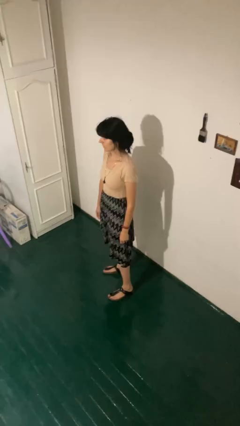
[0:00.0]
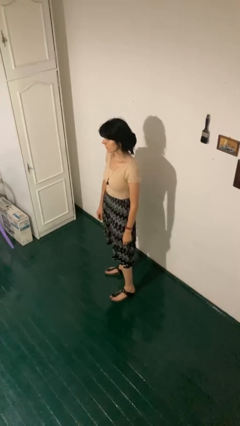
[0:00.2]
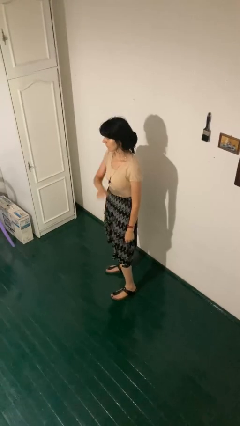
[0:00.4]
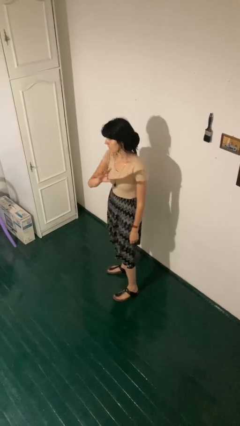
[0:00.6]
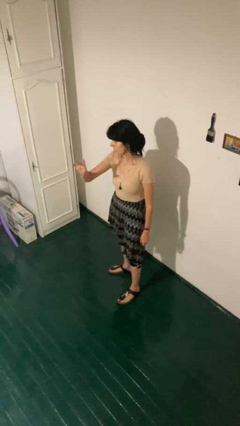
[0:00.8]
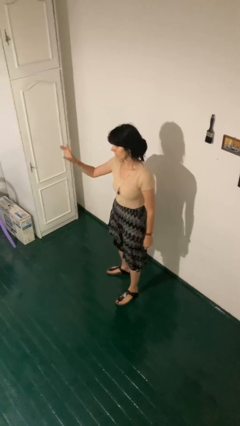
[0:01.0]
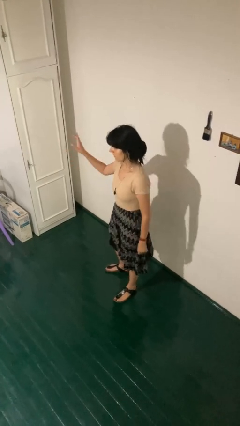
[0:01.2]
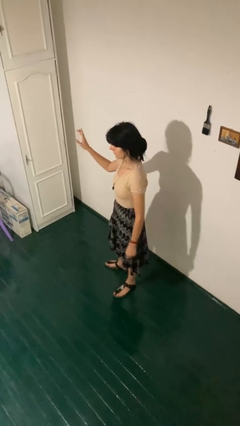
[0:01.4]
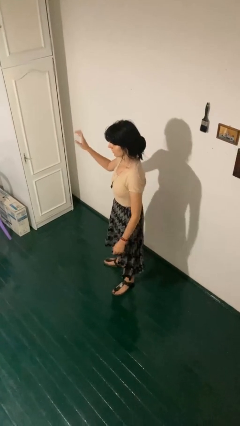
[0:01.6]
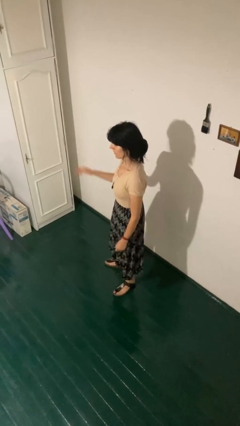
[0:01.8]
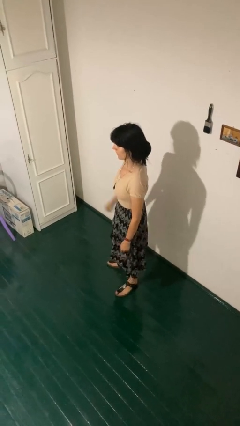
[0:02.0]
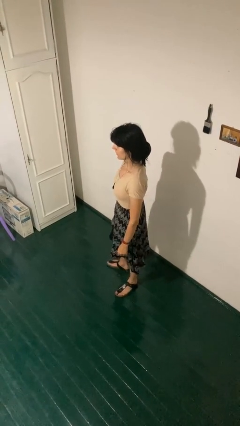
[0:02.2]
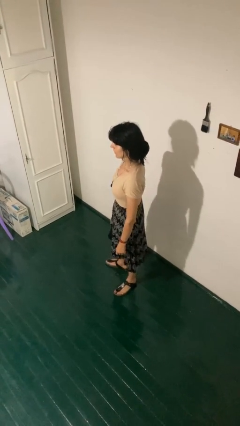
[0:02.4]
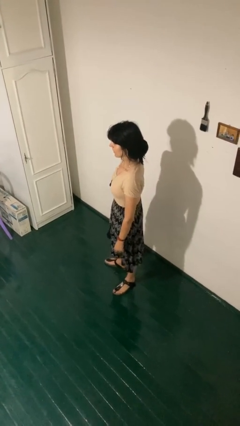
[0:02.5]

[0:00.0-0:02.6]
person gestures swipe right

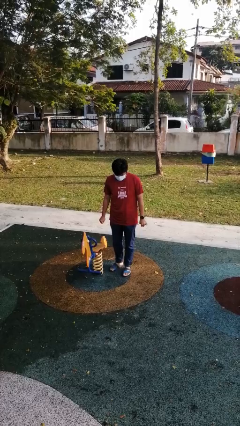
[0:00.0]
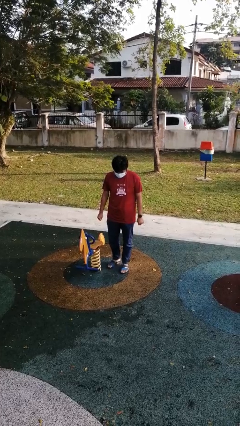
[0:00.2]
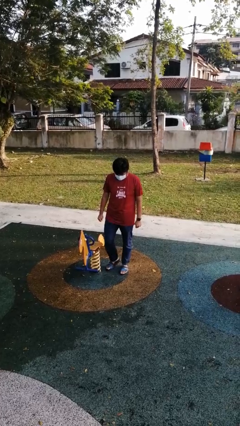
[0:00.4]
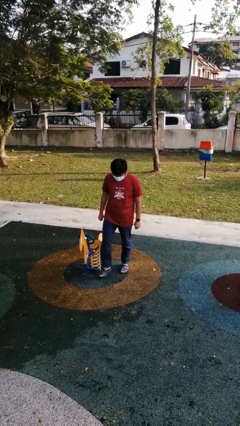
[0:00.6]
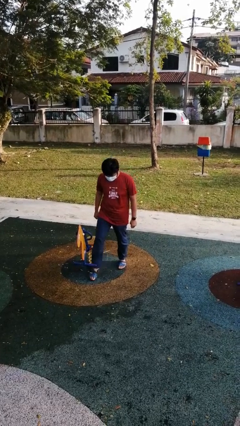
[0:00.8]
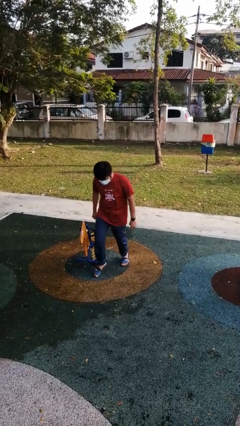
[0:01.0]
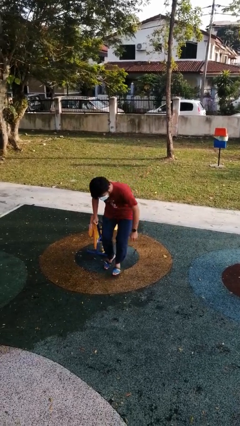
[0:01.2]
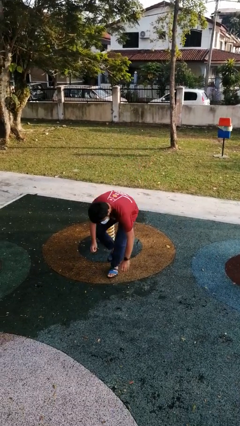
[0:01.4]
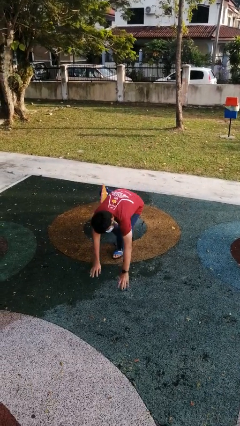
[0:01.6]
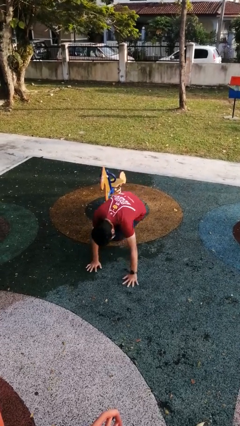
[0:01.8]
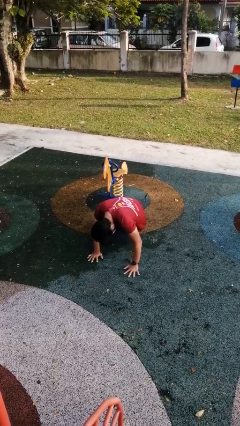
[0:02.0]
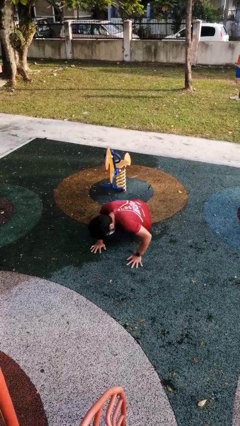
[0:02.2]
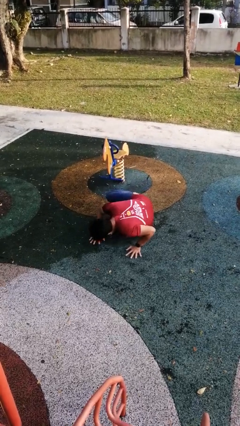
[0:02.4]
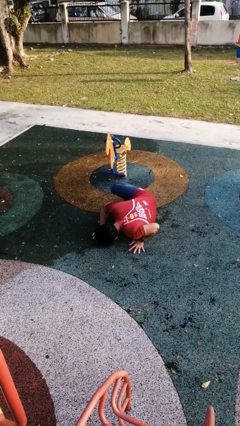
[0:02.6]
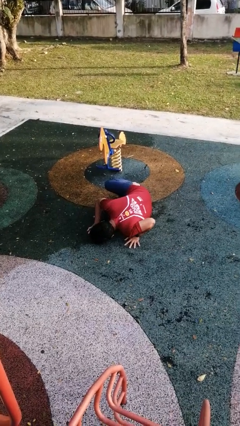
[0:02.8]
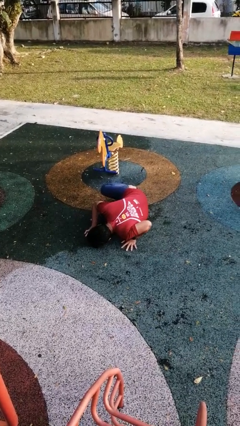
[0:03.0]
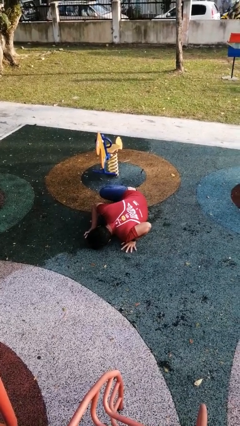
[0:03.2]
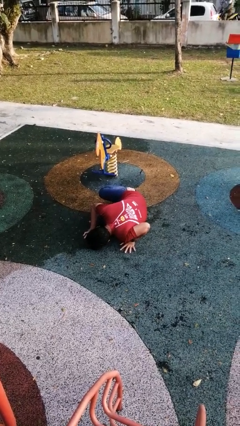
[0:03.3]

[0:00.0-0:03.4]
person trips on object on floor

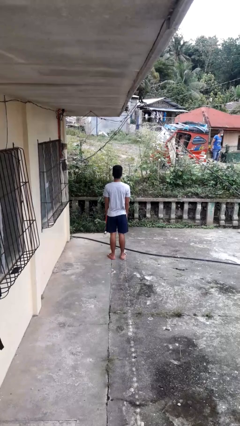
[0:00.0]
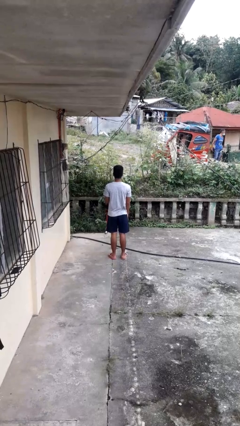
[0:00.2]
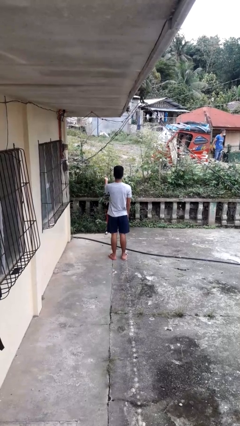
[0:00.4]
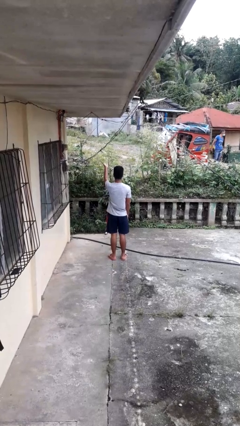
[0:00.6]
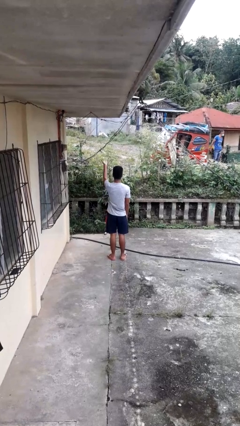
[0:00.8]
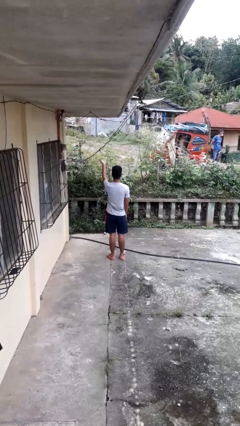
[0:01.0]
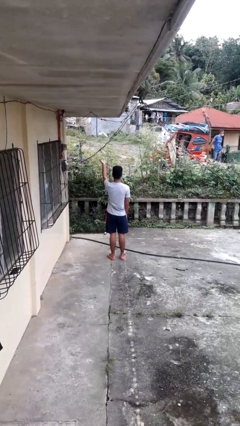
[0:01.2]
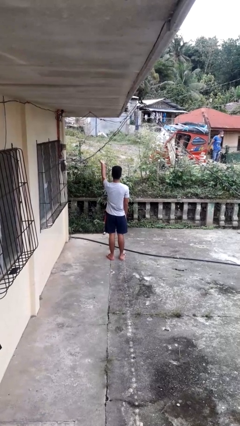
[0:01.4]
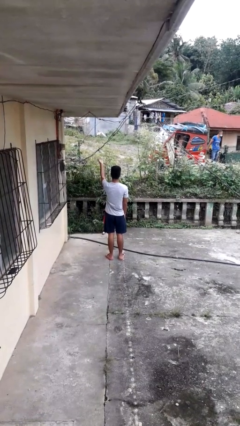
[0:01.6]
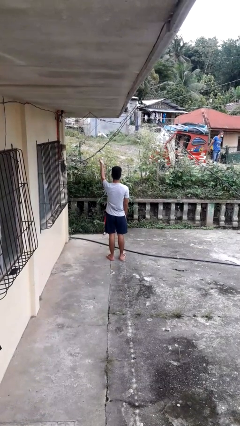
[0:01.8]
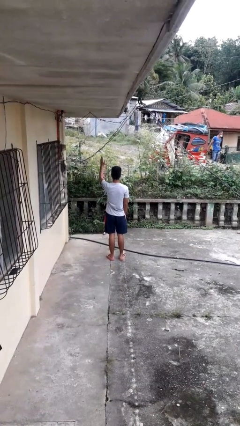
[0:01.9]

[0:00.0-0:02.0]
person gestures swipe up

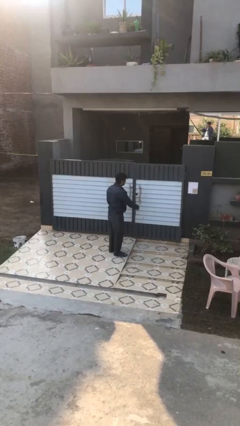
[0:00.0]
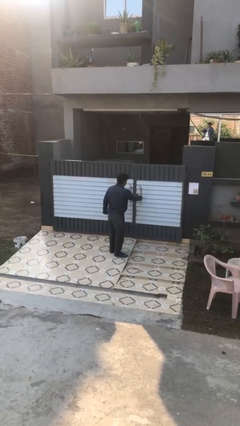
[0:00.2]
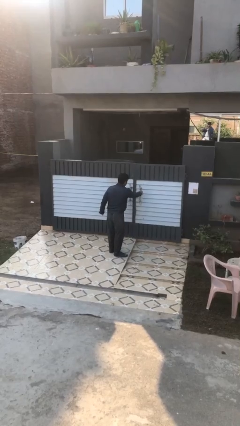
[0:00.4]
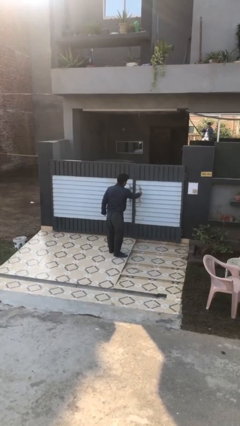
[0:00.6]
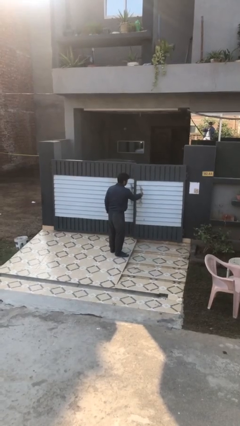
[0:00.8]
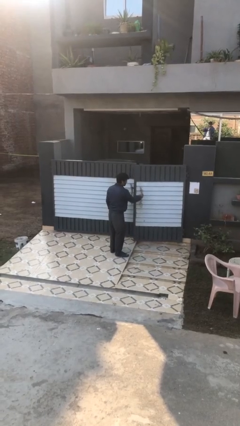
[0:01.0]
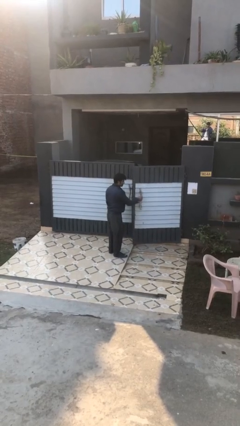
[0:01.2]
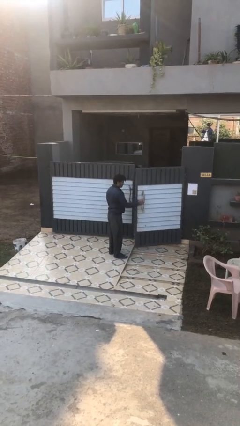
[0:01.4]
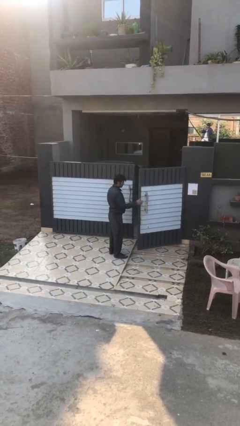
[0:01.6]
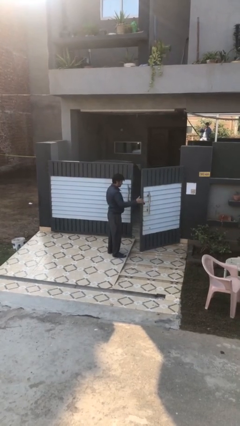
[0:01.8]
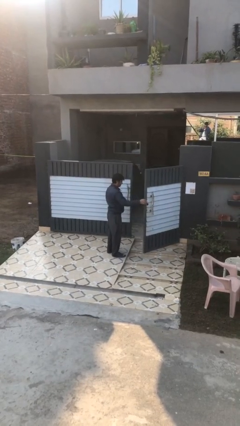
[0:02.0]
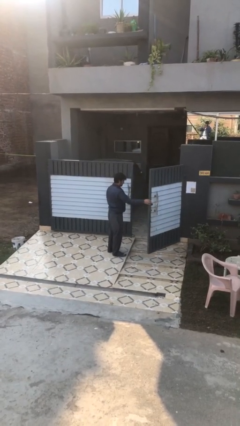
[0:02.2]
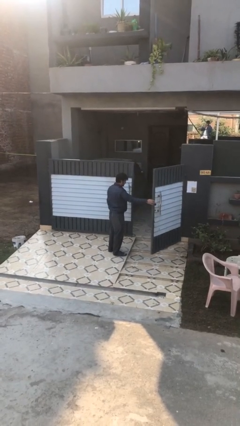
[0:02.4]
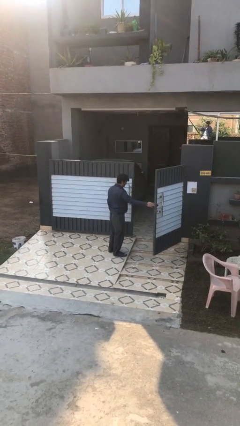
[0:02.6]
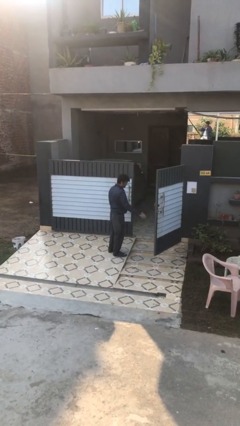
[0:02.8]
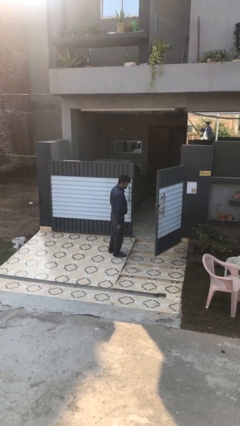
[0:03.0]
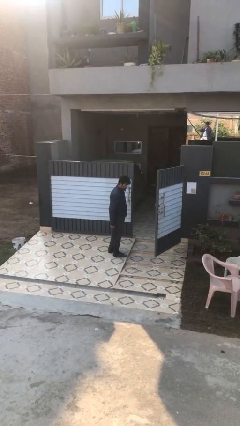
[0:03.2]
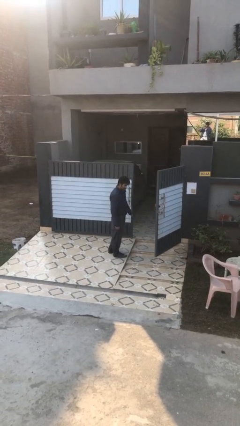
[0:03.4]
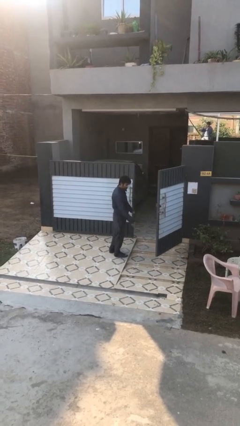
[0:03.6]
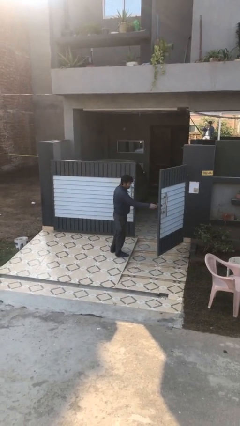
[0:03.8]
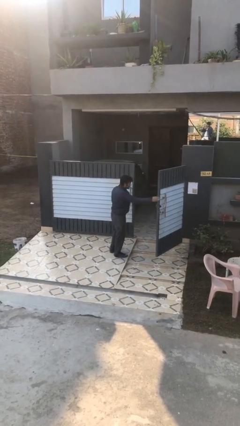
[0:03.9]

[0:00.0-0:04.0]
person opens facility door

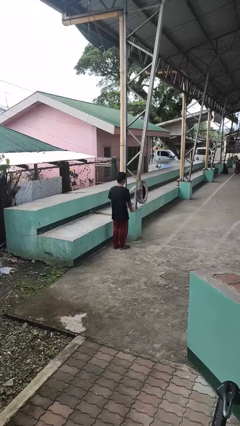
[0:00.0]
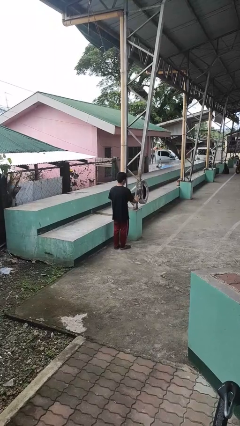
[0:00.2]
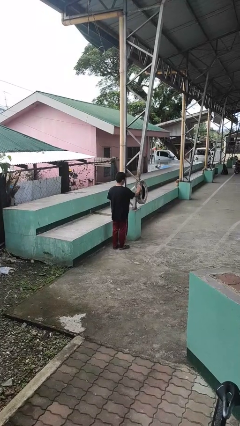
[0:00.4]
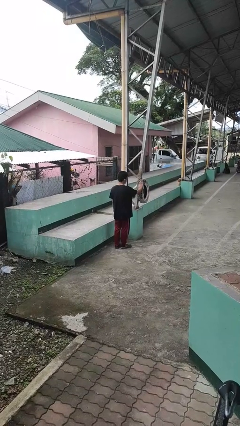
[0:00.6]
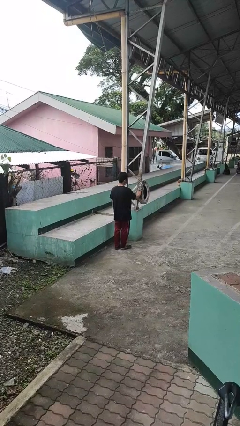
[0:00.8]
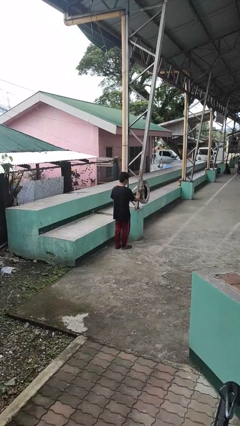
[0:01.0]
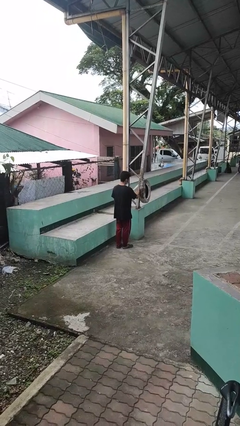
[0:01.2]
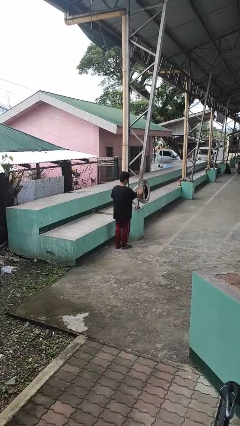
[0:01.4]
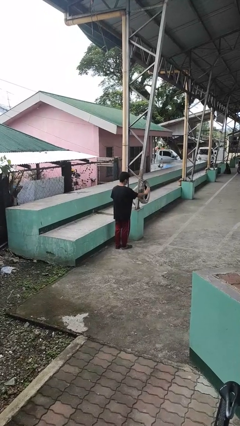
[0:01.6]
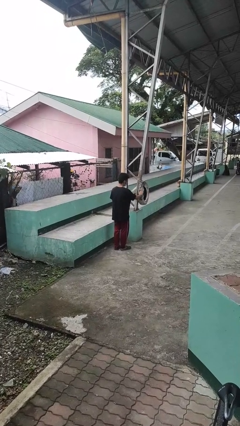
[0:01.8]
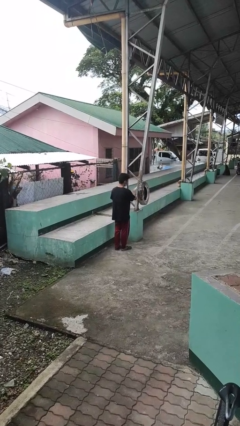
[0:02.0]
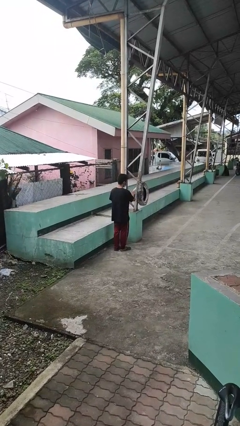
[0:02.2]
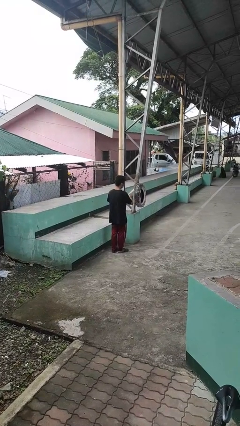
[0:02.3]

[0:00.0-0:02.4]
person waves hand over object

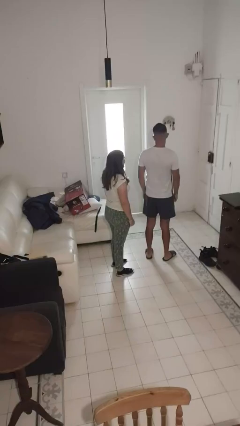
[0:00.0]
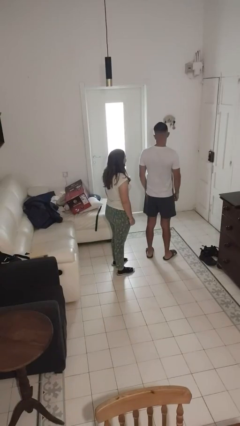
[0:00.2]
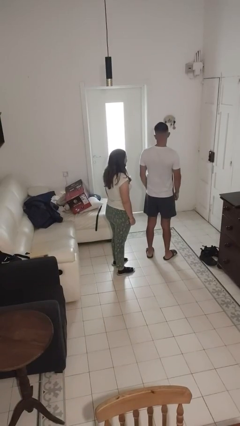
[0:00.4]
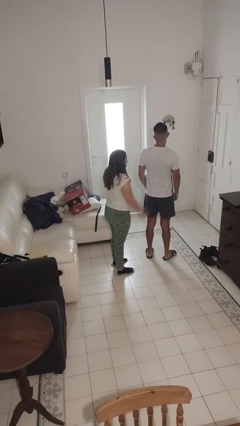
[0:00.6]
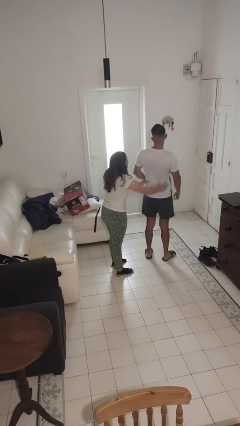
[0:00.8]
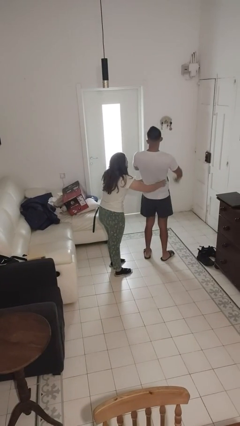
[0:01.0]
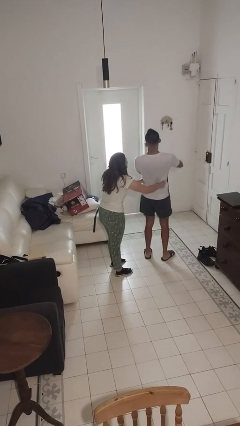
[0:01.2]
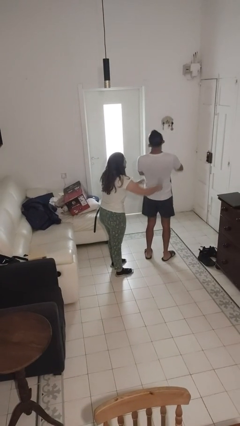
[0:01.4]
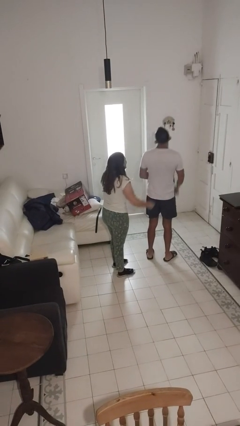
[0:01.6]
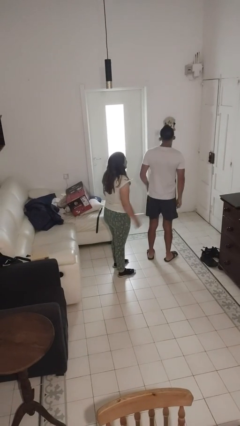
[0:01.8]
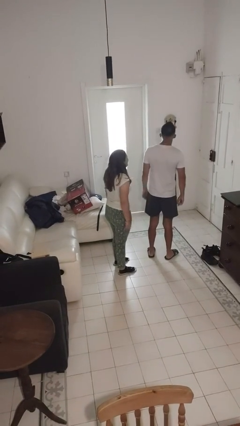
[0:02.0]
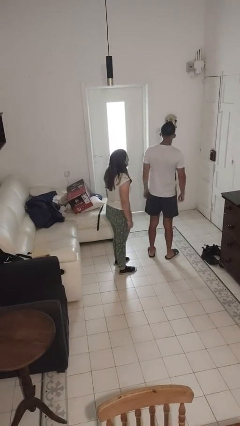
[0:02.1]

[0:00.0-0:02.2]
person tickles person

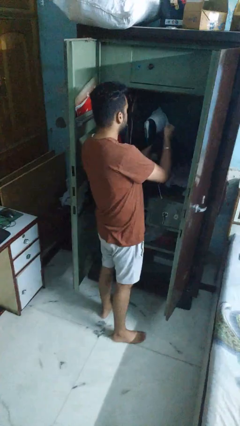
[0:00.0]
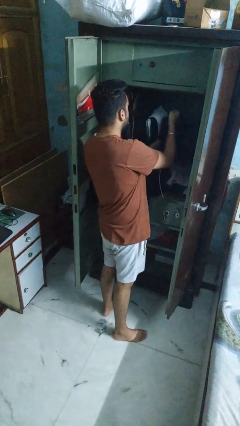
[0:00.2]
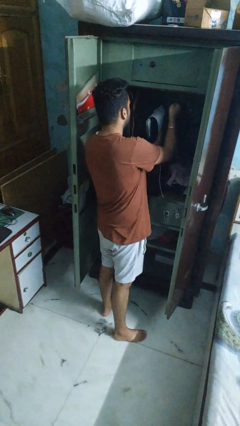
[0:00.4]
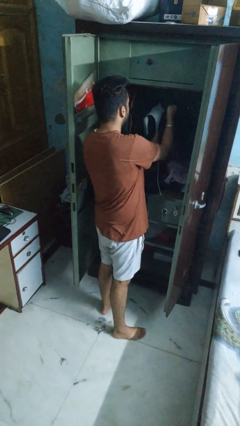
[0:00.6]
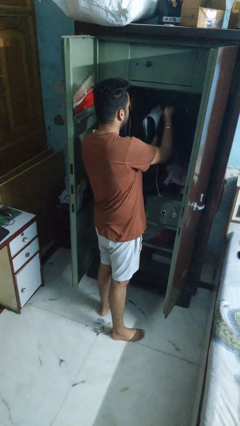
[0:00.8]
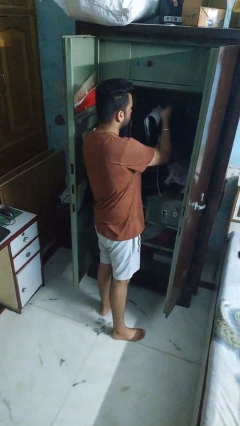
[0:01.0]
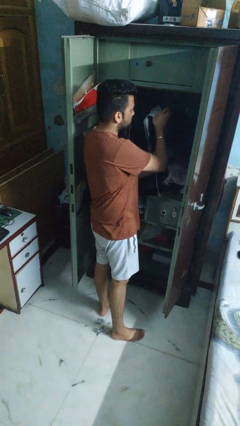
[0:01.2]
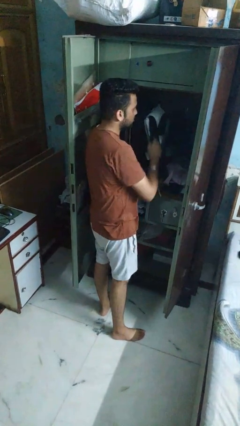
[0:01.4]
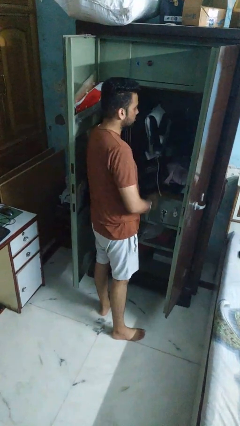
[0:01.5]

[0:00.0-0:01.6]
person puts clothes into closet
